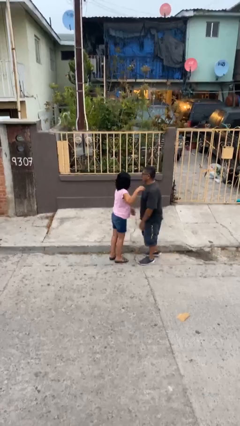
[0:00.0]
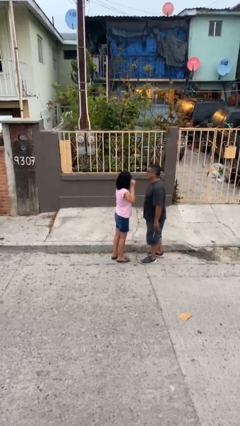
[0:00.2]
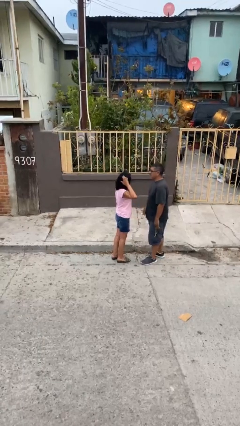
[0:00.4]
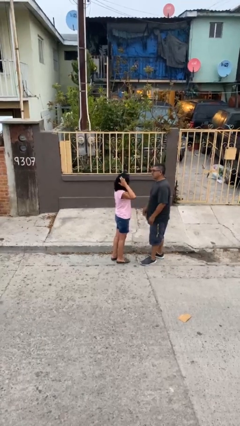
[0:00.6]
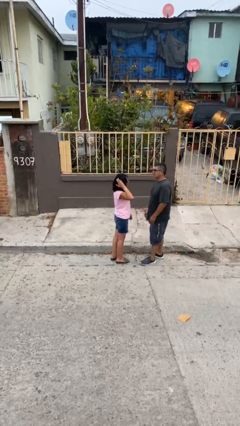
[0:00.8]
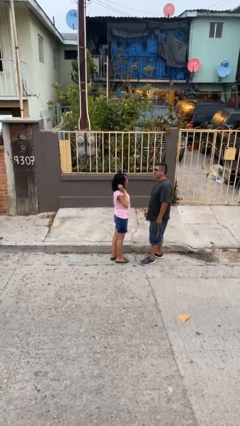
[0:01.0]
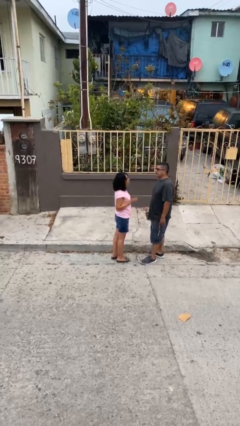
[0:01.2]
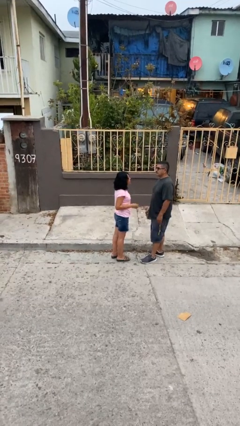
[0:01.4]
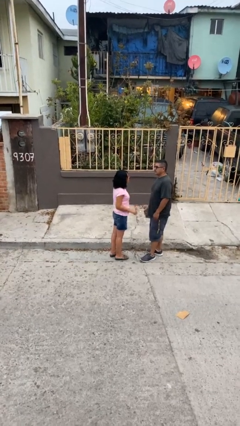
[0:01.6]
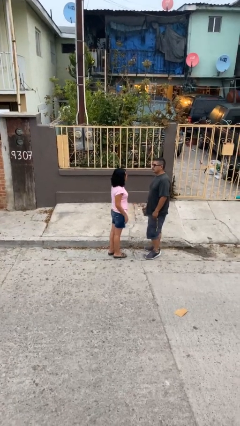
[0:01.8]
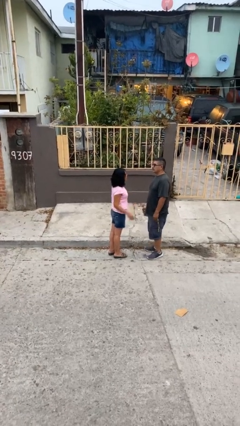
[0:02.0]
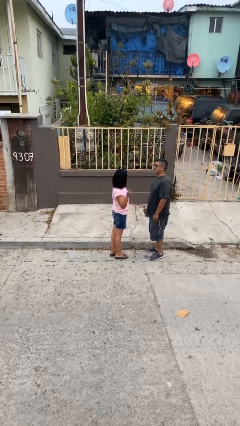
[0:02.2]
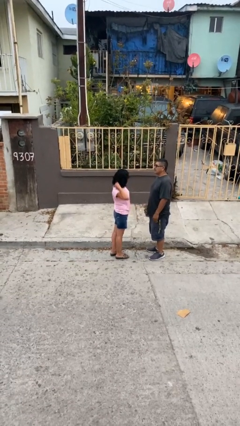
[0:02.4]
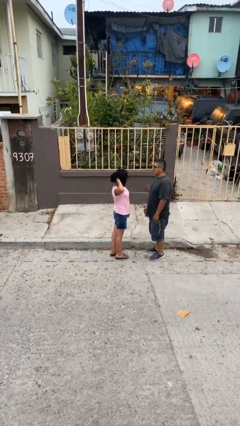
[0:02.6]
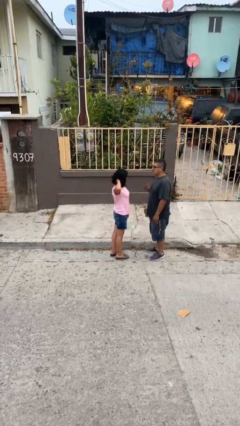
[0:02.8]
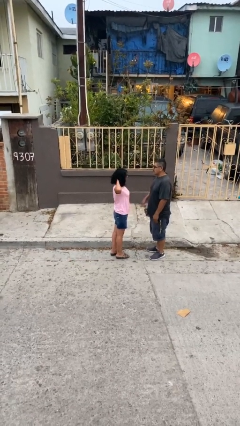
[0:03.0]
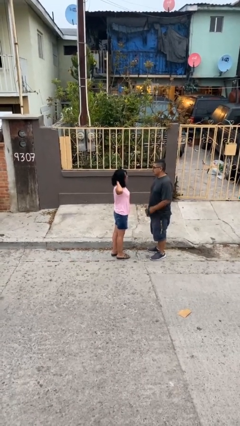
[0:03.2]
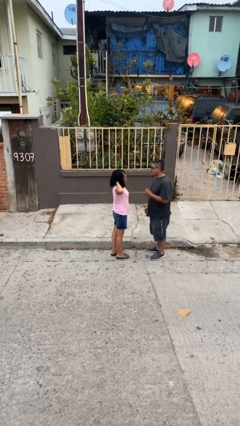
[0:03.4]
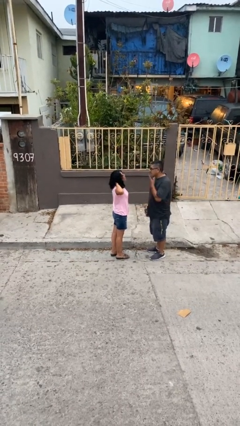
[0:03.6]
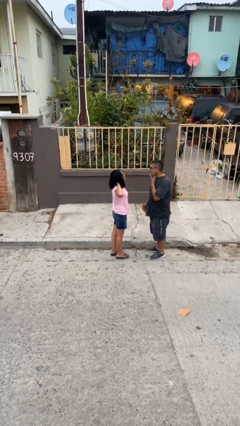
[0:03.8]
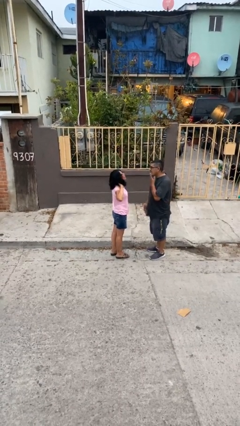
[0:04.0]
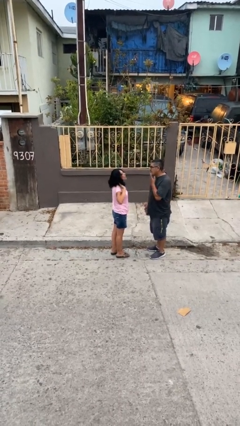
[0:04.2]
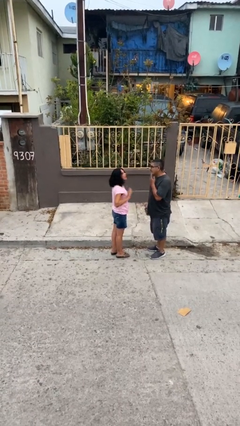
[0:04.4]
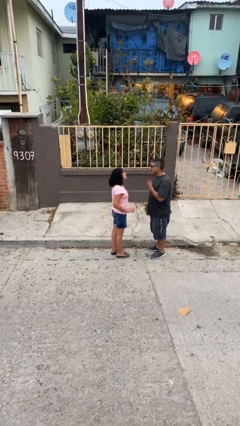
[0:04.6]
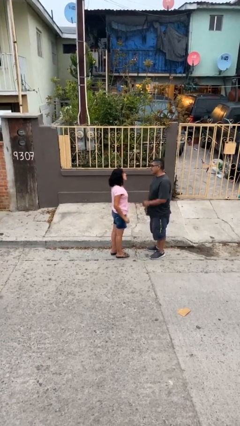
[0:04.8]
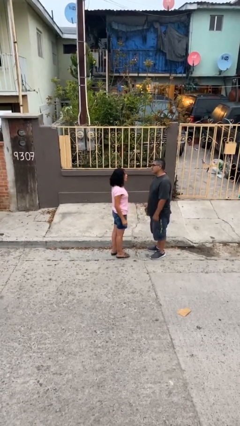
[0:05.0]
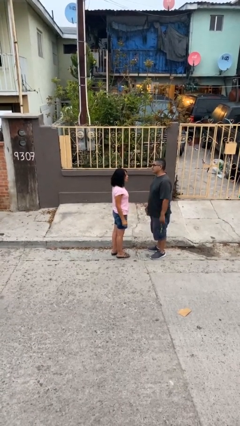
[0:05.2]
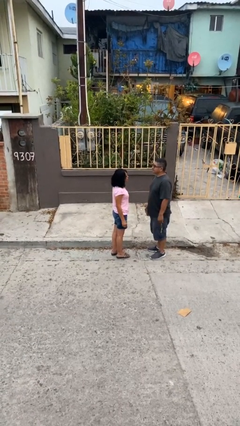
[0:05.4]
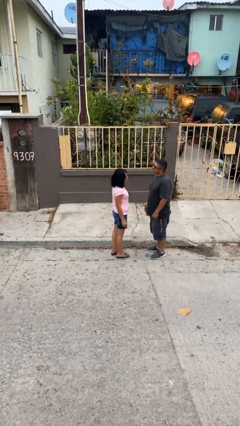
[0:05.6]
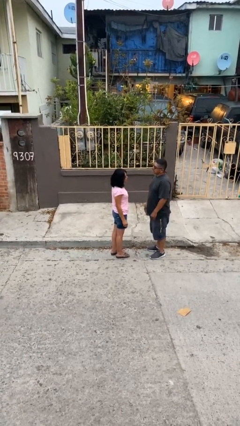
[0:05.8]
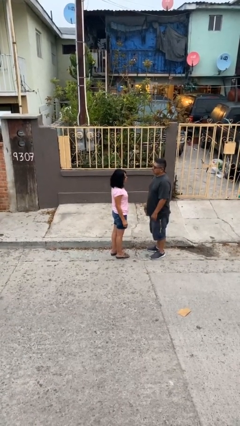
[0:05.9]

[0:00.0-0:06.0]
person talks to person

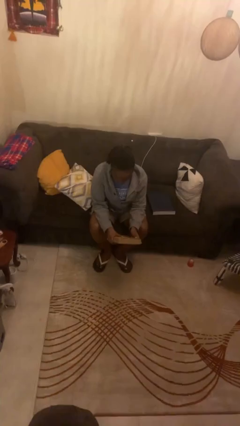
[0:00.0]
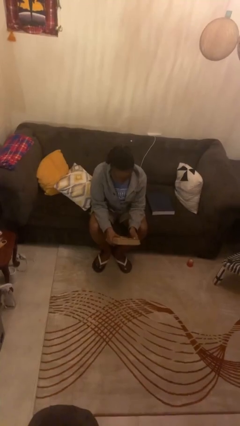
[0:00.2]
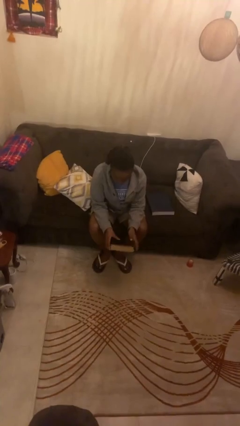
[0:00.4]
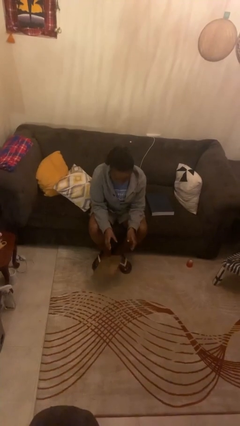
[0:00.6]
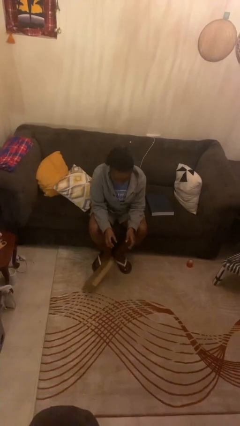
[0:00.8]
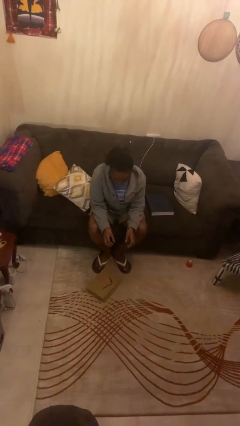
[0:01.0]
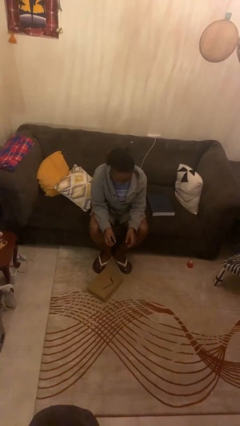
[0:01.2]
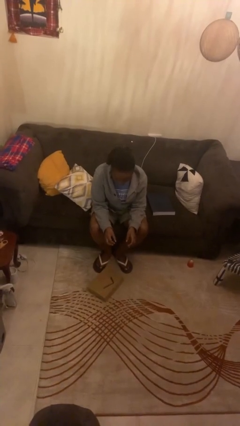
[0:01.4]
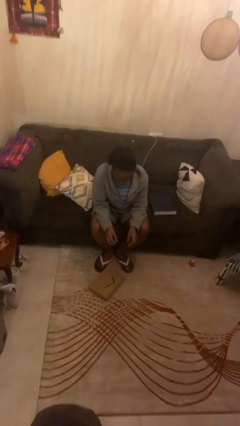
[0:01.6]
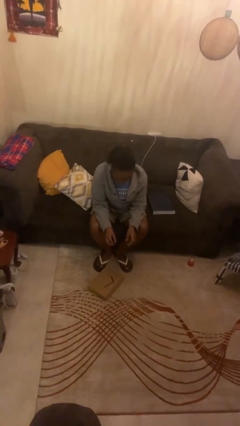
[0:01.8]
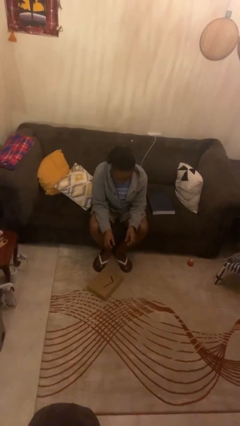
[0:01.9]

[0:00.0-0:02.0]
person drops object

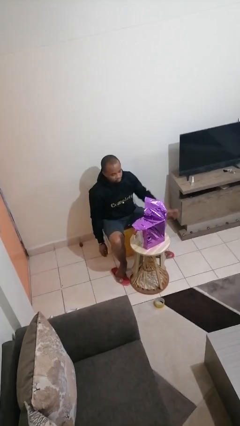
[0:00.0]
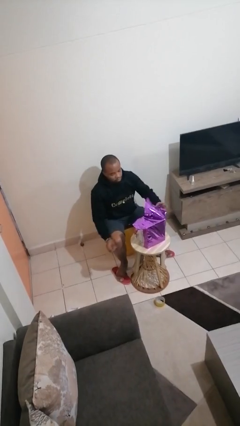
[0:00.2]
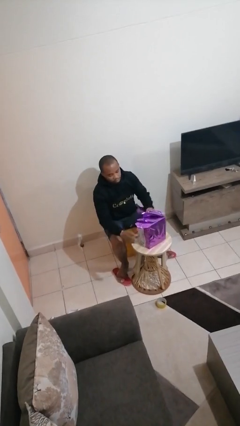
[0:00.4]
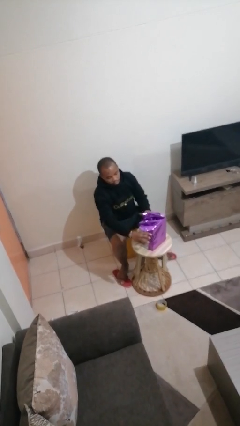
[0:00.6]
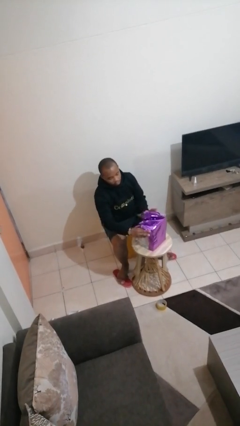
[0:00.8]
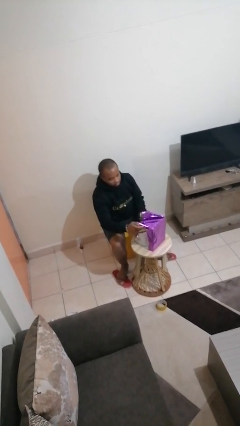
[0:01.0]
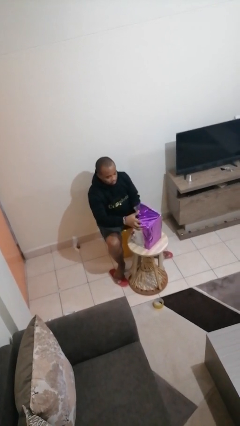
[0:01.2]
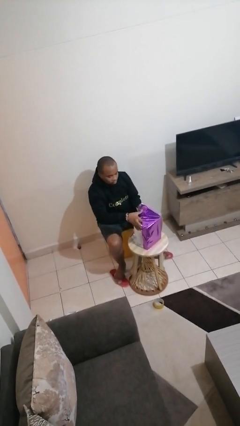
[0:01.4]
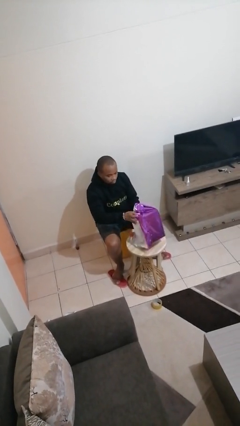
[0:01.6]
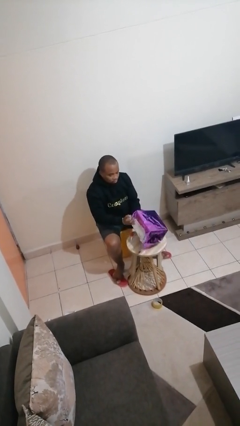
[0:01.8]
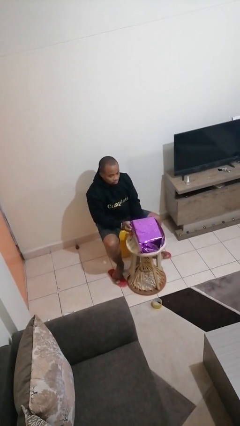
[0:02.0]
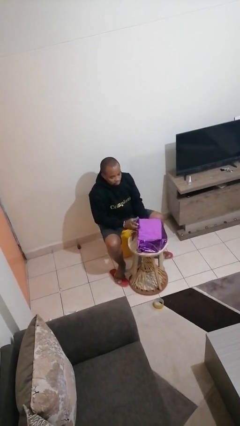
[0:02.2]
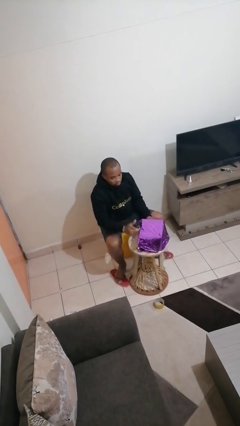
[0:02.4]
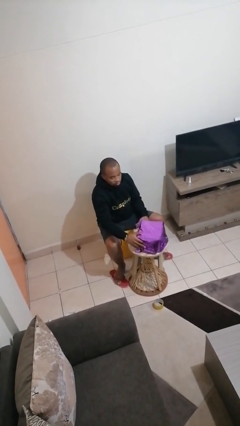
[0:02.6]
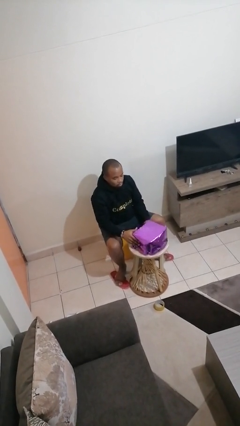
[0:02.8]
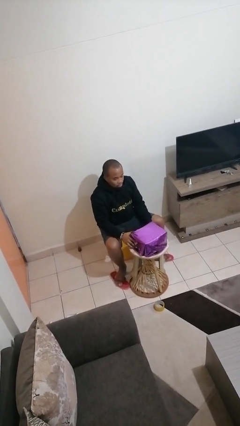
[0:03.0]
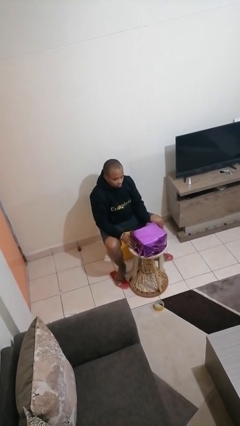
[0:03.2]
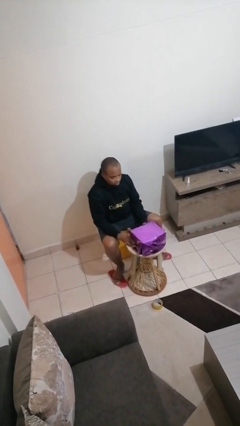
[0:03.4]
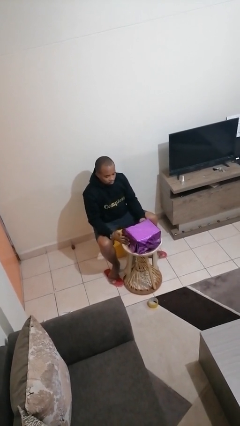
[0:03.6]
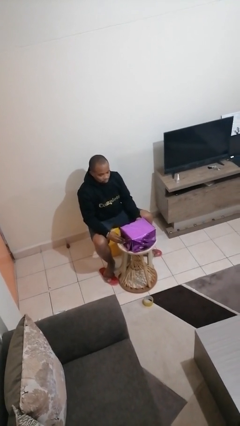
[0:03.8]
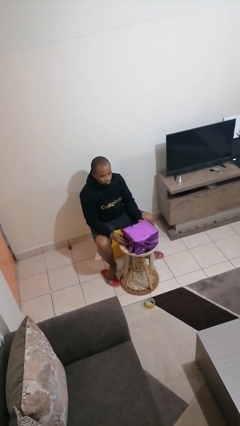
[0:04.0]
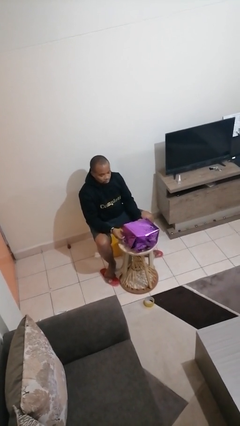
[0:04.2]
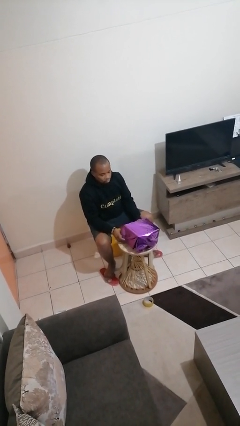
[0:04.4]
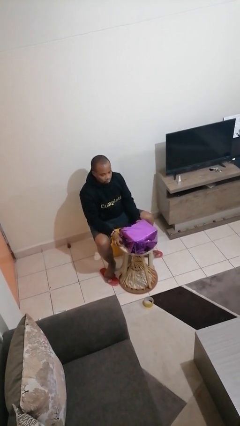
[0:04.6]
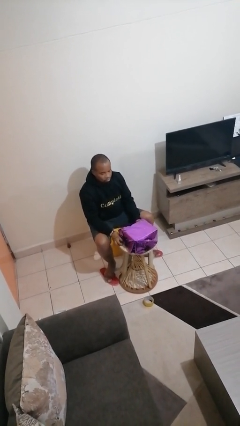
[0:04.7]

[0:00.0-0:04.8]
person wraps box

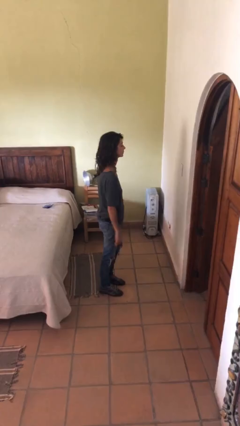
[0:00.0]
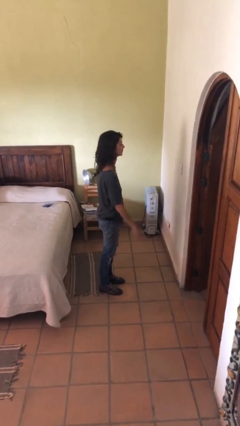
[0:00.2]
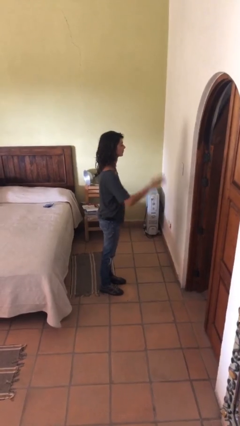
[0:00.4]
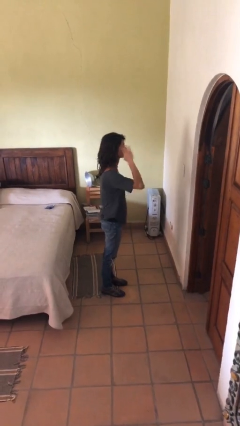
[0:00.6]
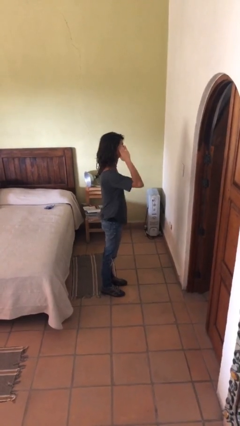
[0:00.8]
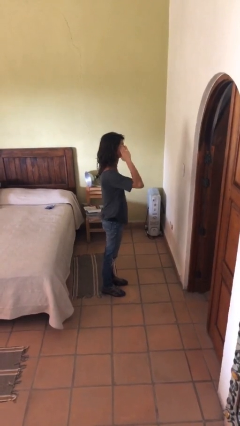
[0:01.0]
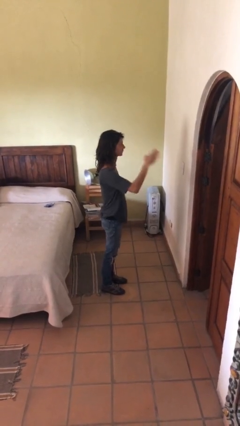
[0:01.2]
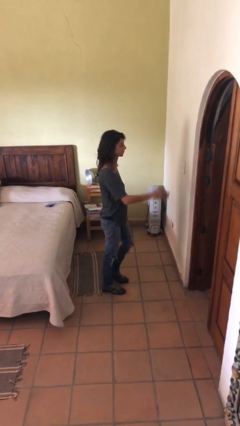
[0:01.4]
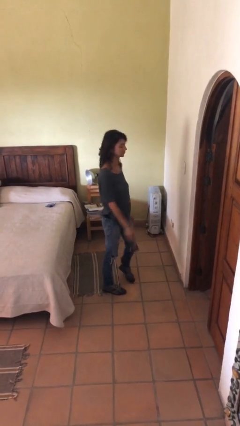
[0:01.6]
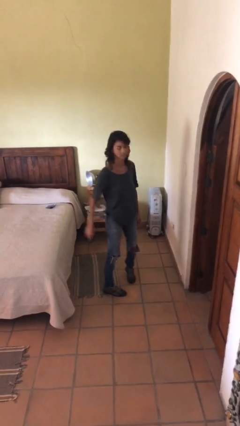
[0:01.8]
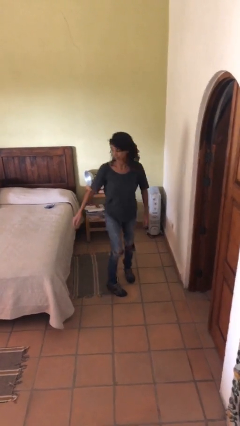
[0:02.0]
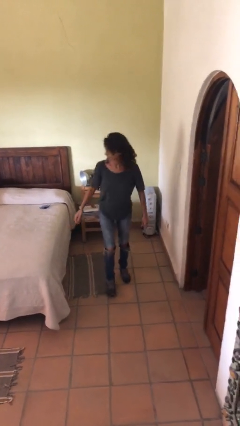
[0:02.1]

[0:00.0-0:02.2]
person salutes

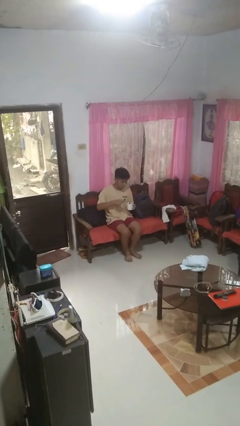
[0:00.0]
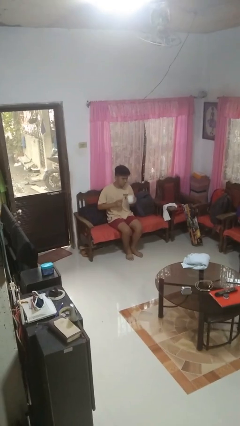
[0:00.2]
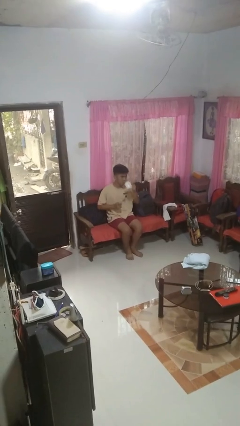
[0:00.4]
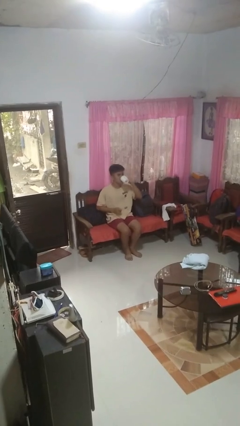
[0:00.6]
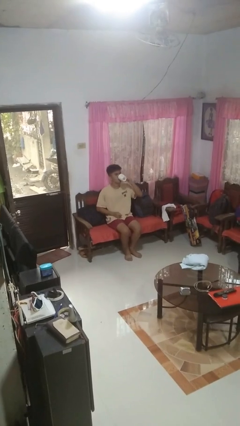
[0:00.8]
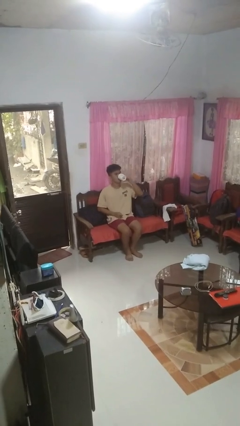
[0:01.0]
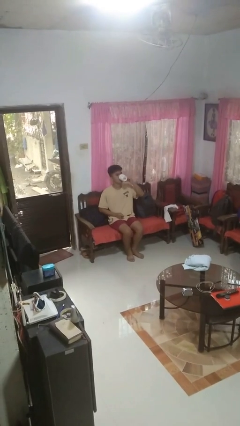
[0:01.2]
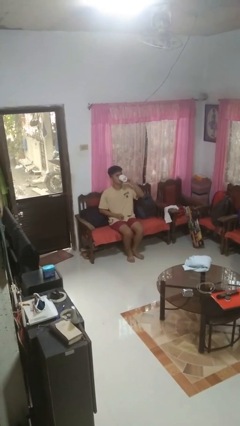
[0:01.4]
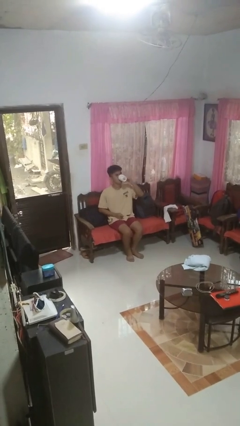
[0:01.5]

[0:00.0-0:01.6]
person drinks from mug

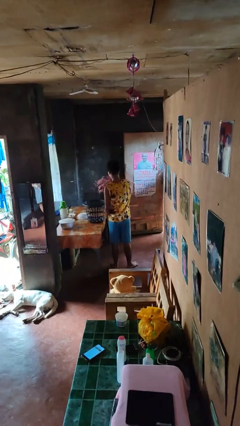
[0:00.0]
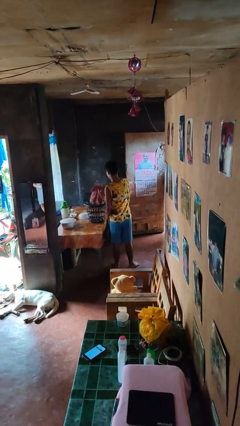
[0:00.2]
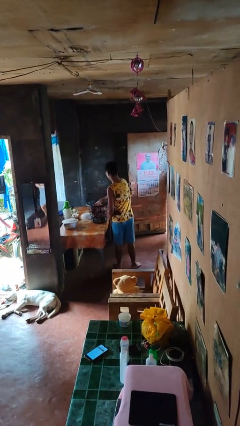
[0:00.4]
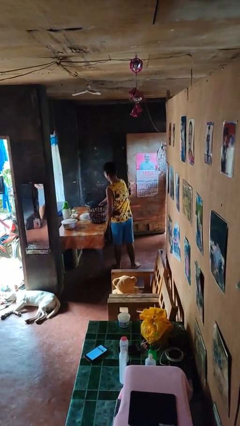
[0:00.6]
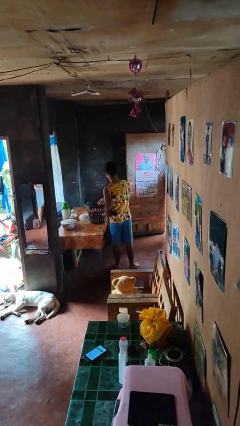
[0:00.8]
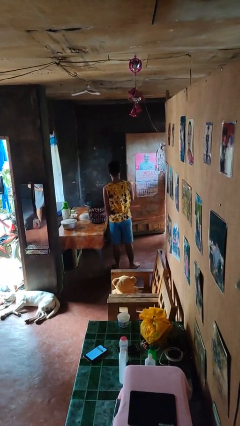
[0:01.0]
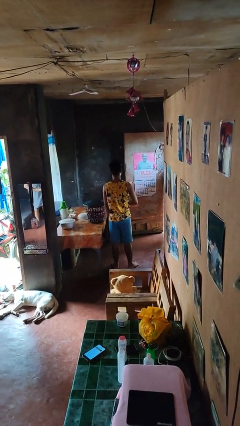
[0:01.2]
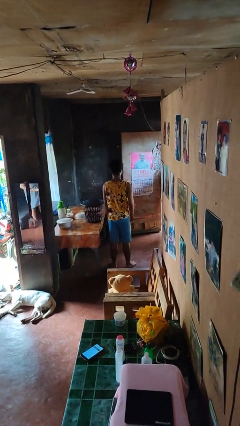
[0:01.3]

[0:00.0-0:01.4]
person puts object into basket
